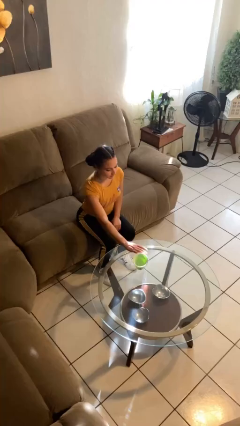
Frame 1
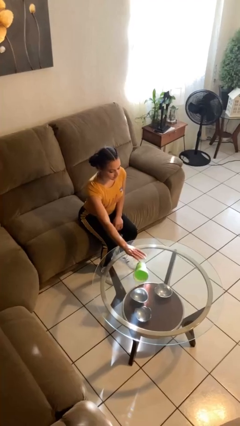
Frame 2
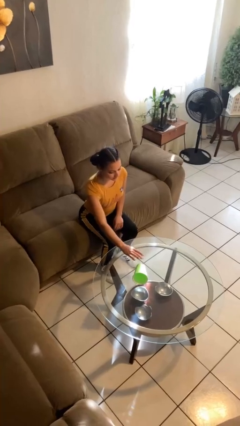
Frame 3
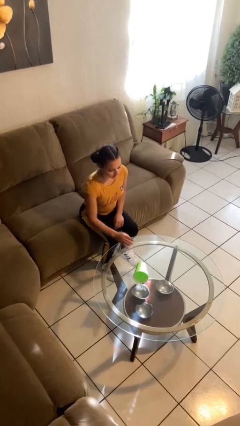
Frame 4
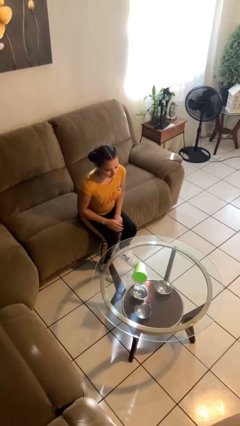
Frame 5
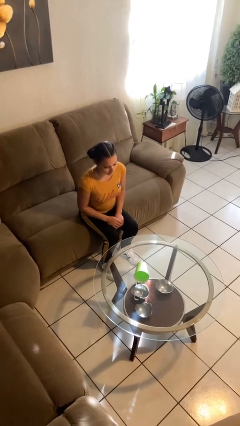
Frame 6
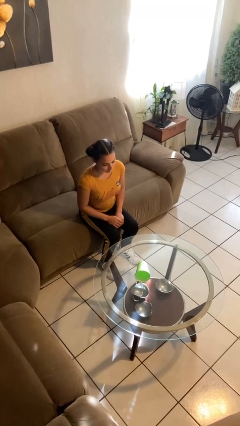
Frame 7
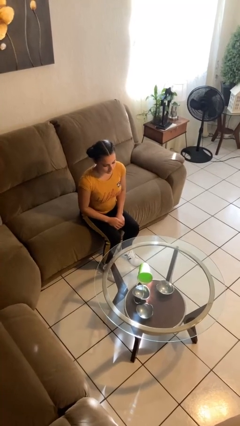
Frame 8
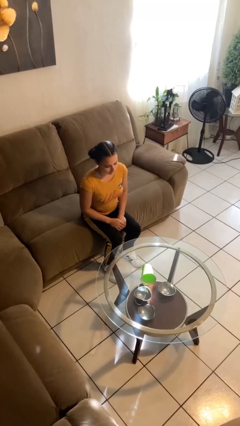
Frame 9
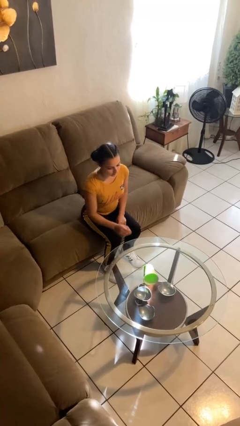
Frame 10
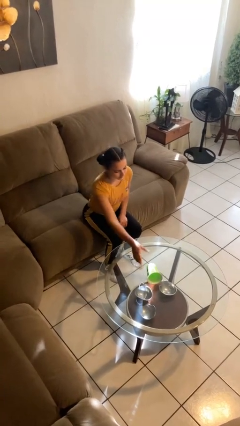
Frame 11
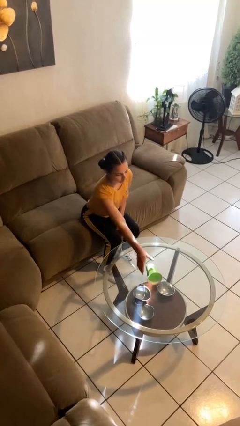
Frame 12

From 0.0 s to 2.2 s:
person spills on table

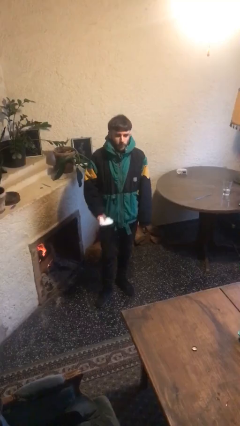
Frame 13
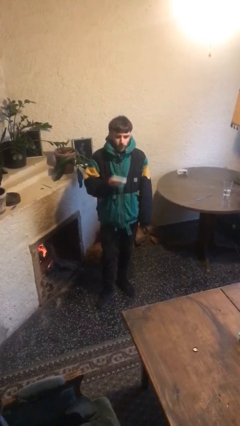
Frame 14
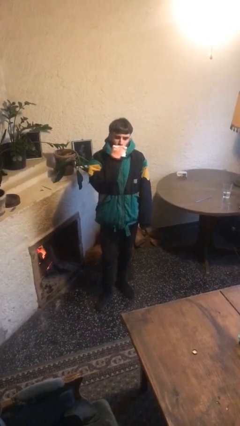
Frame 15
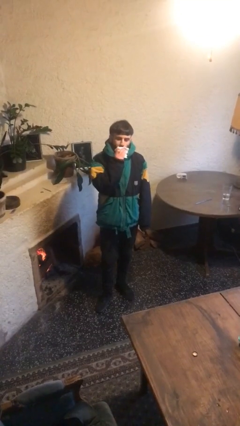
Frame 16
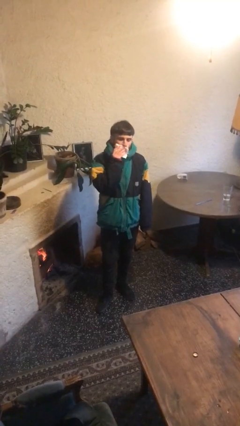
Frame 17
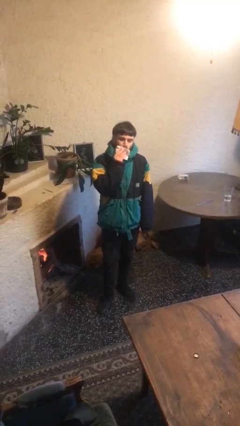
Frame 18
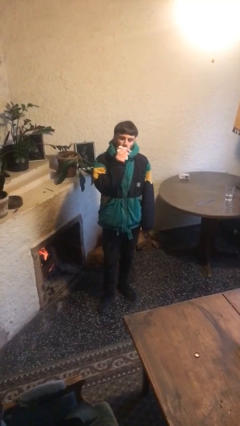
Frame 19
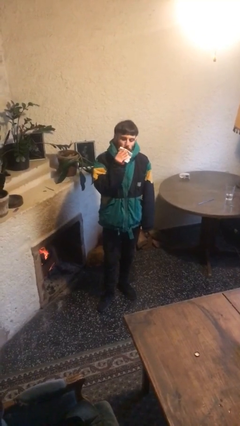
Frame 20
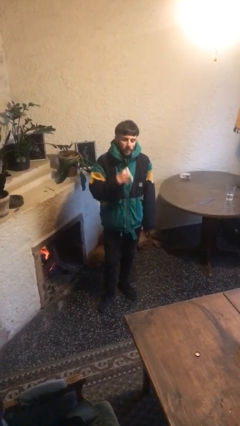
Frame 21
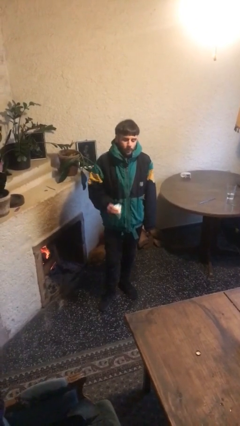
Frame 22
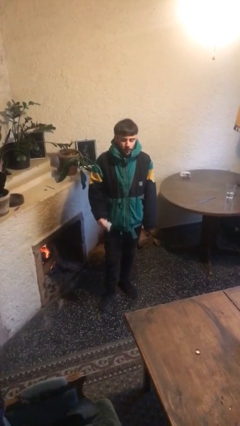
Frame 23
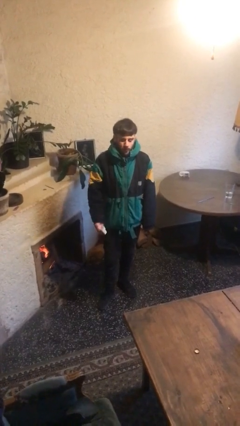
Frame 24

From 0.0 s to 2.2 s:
person wipes mouth with napkin

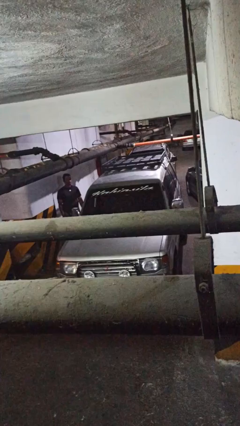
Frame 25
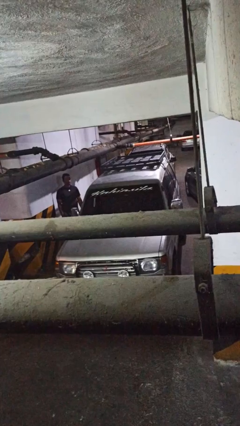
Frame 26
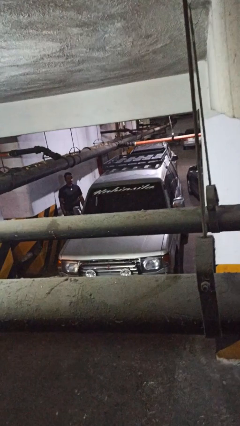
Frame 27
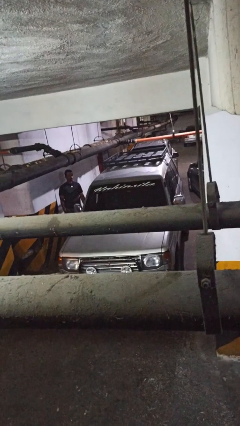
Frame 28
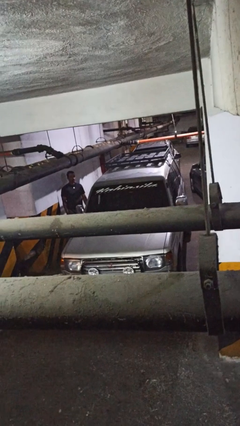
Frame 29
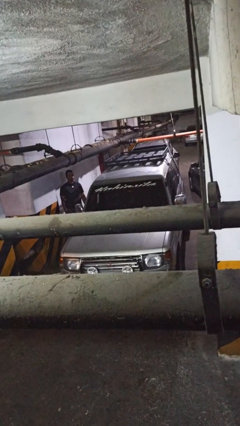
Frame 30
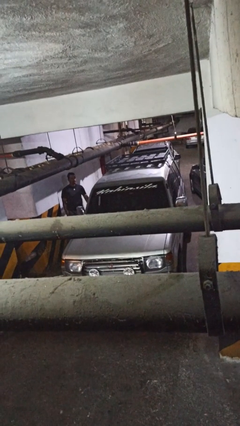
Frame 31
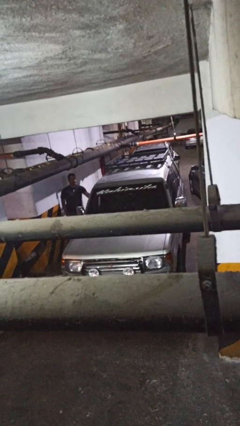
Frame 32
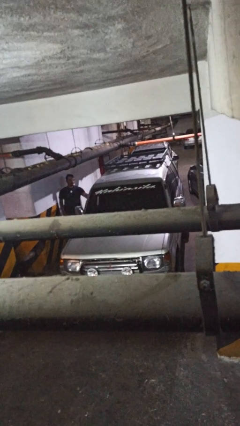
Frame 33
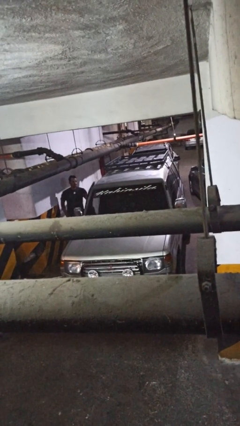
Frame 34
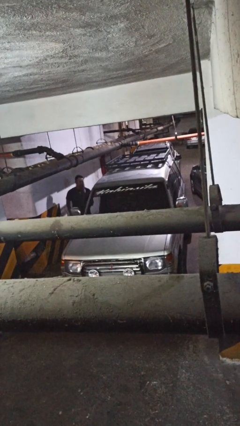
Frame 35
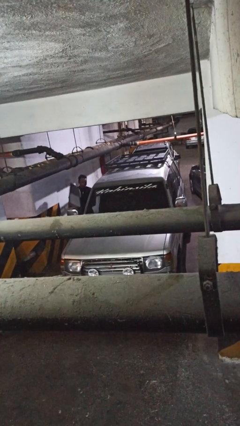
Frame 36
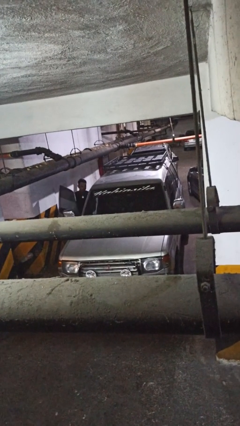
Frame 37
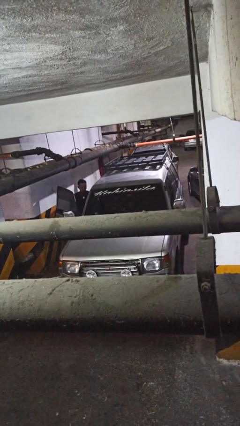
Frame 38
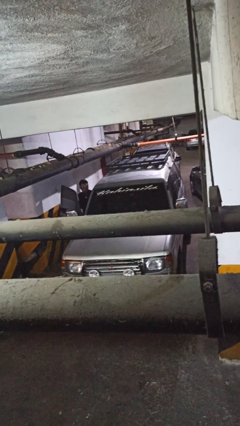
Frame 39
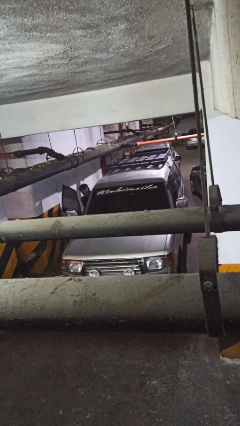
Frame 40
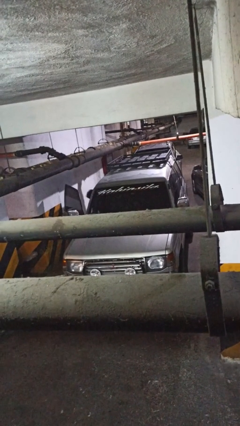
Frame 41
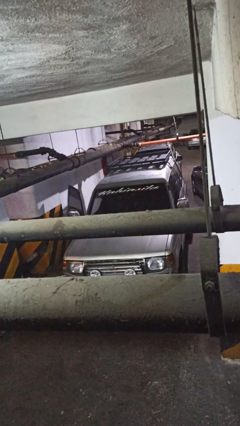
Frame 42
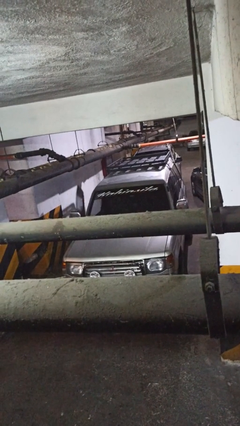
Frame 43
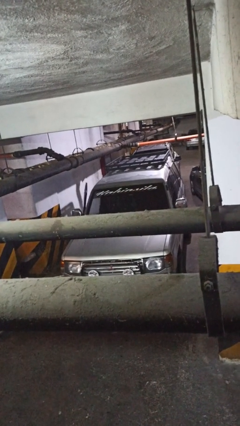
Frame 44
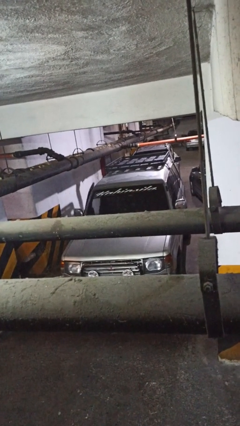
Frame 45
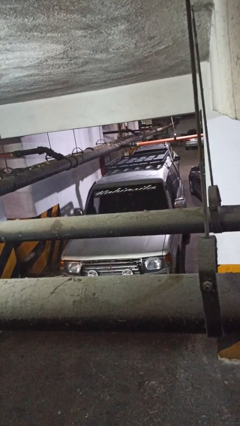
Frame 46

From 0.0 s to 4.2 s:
car picks up person

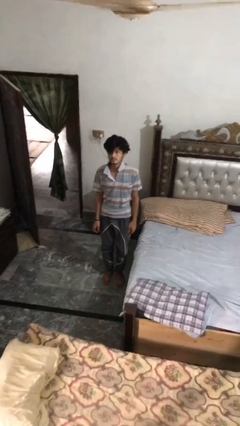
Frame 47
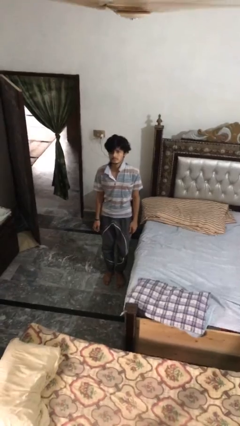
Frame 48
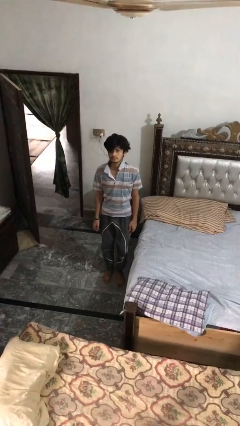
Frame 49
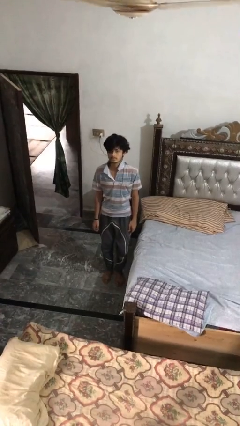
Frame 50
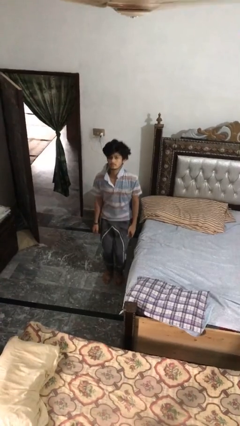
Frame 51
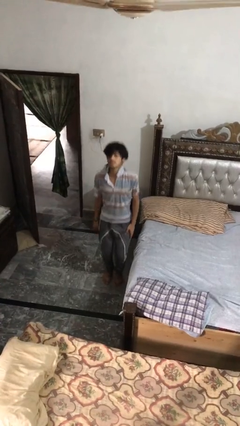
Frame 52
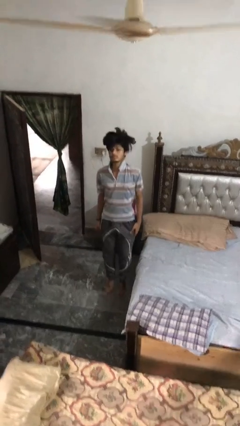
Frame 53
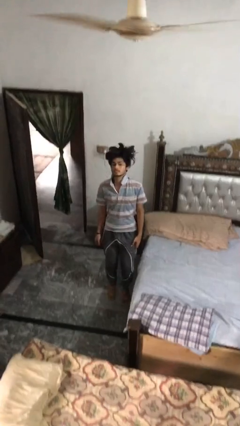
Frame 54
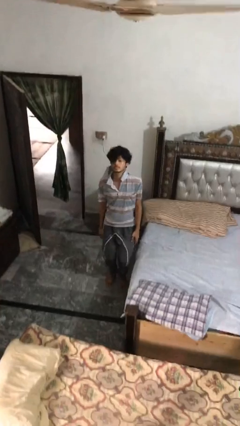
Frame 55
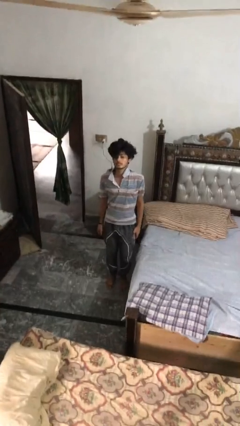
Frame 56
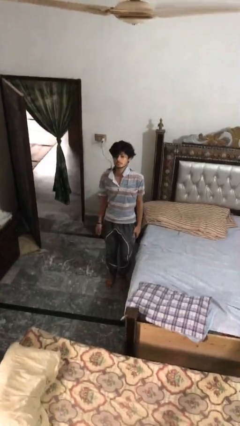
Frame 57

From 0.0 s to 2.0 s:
person jumps

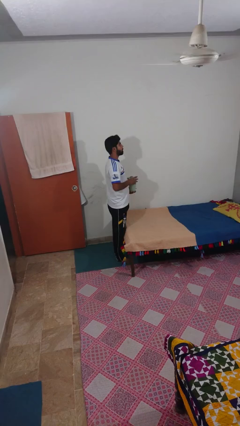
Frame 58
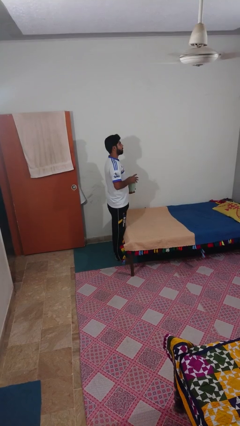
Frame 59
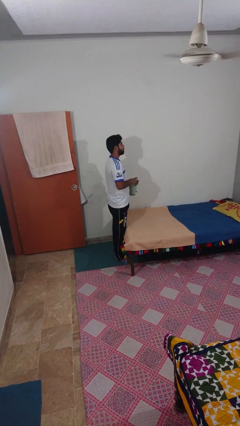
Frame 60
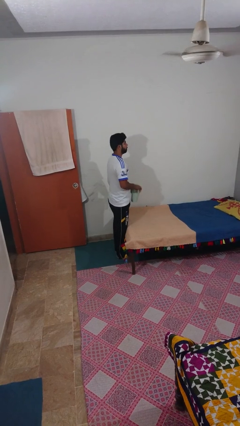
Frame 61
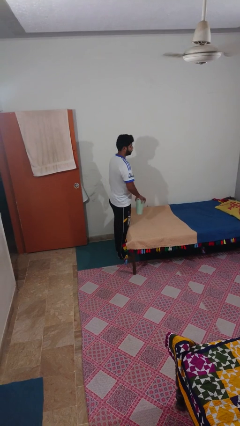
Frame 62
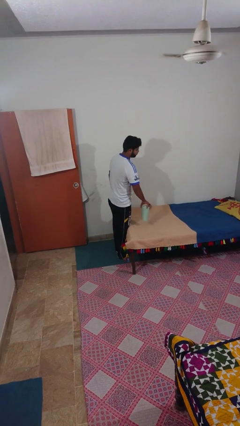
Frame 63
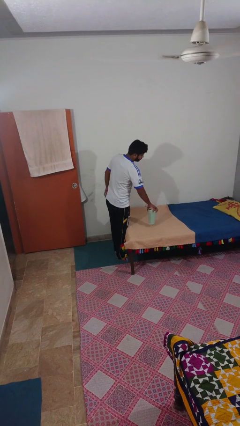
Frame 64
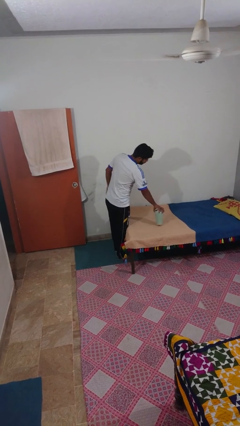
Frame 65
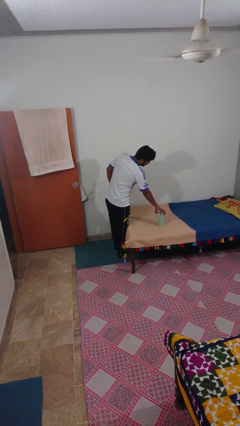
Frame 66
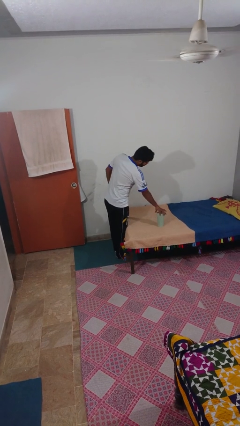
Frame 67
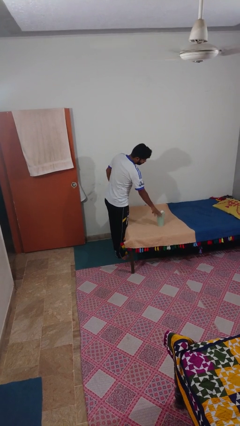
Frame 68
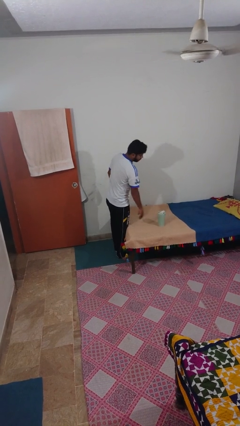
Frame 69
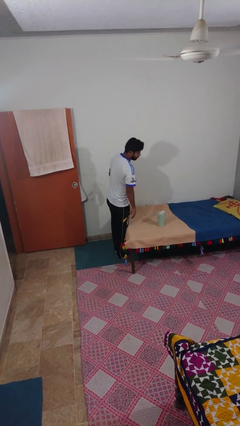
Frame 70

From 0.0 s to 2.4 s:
person puts down object on bed

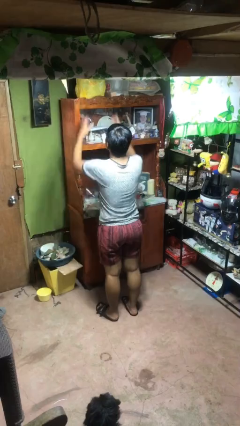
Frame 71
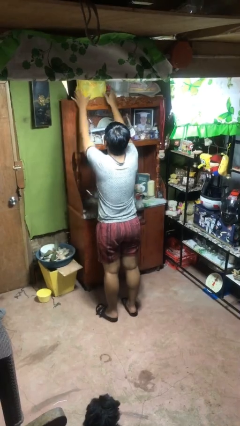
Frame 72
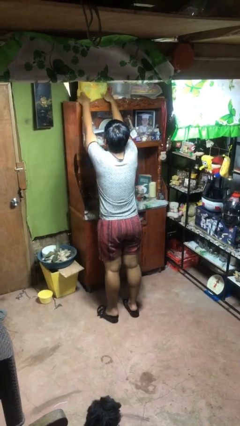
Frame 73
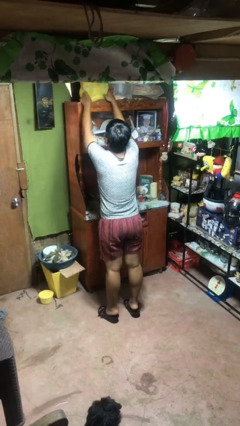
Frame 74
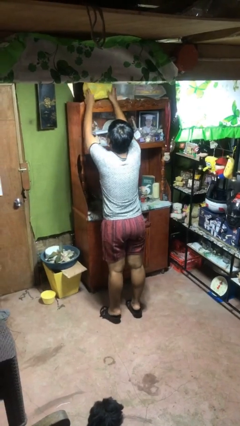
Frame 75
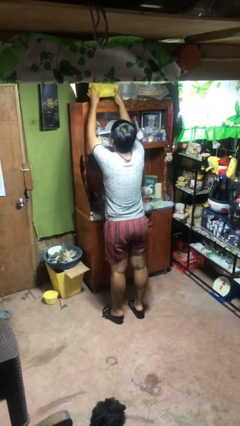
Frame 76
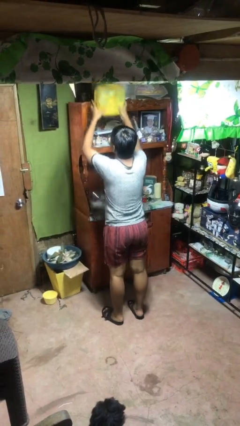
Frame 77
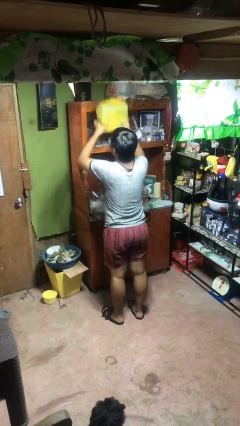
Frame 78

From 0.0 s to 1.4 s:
person picks up object from shelf

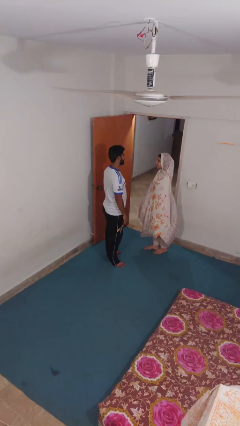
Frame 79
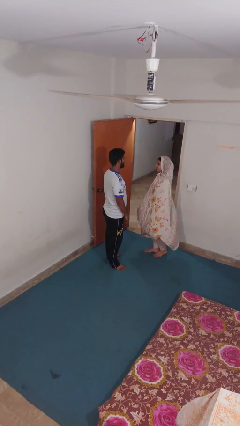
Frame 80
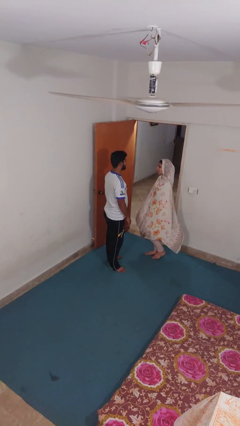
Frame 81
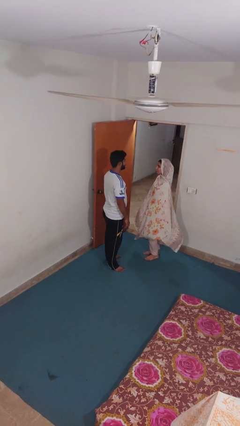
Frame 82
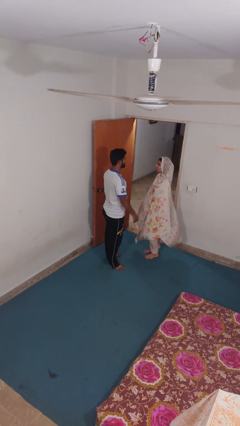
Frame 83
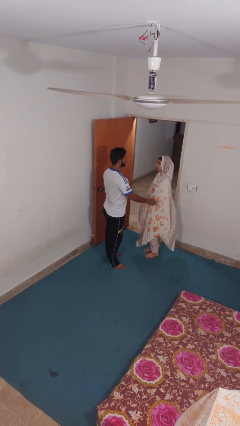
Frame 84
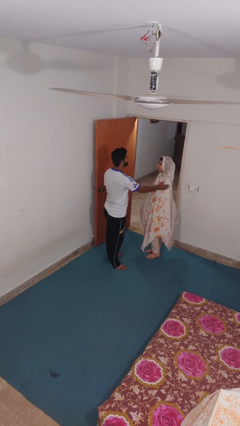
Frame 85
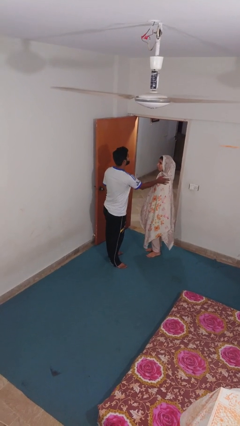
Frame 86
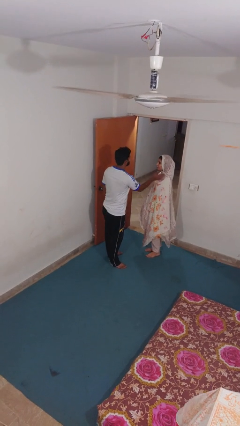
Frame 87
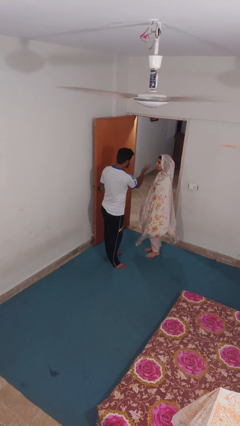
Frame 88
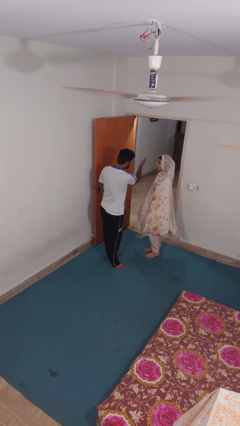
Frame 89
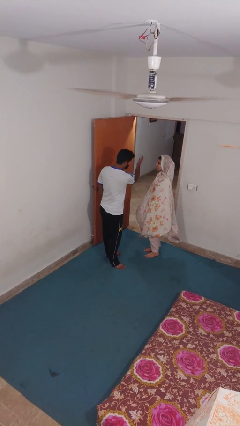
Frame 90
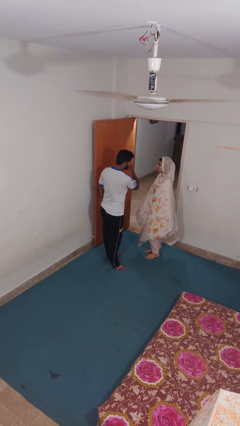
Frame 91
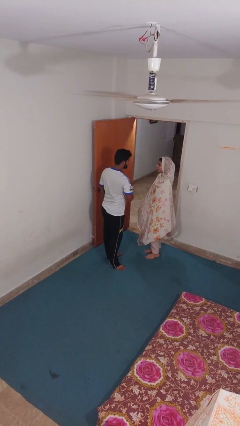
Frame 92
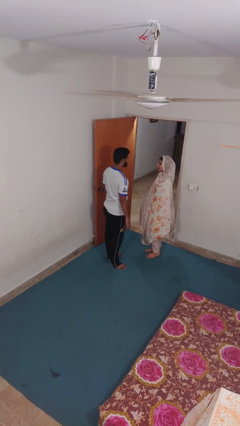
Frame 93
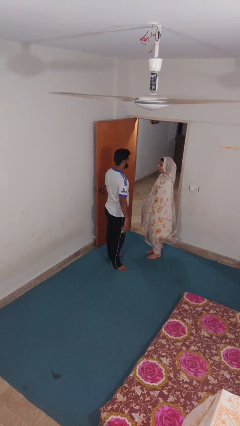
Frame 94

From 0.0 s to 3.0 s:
person shoves person
